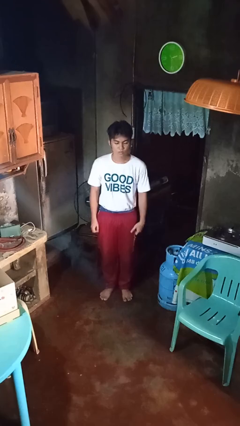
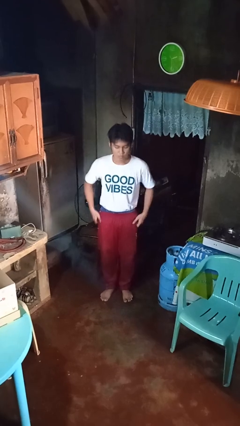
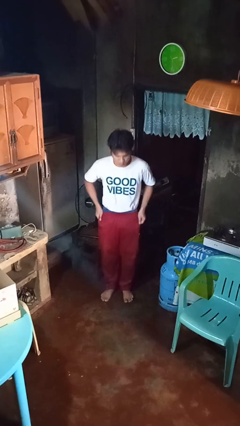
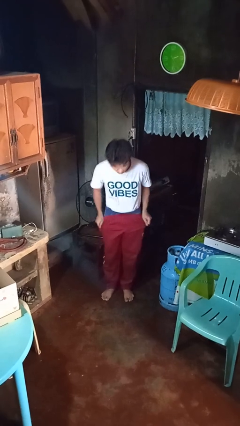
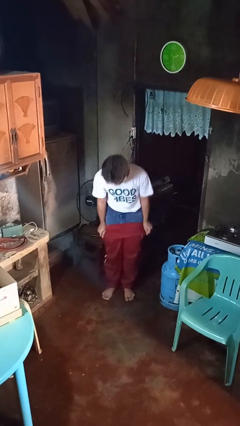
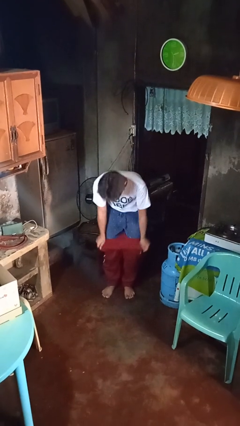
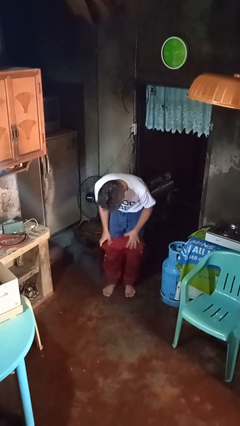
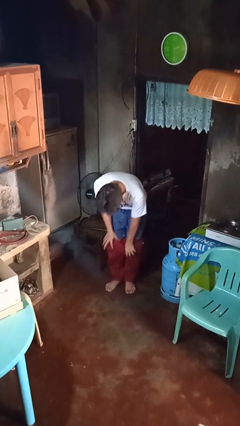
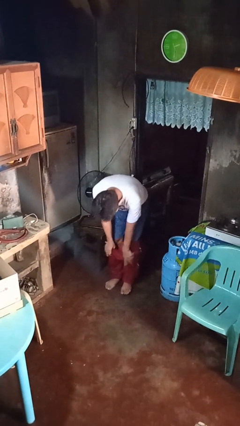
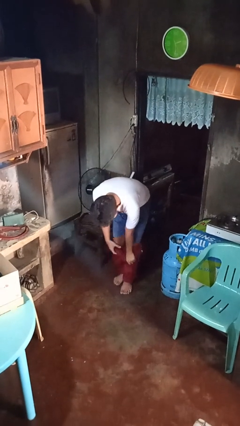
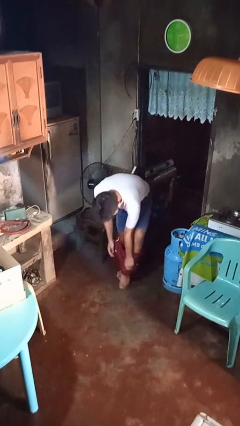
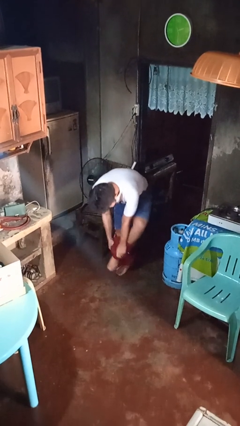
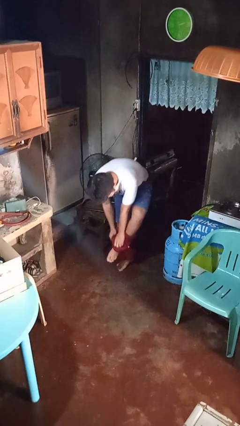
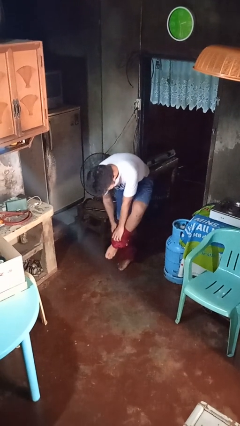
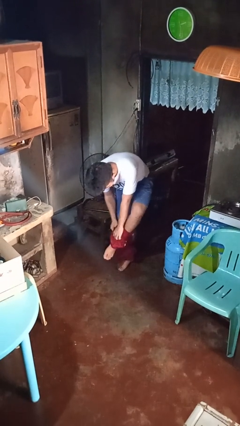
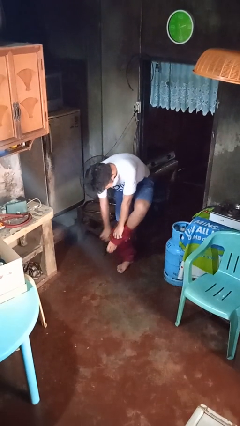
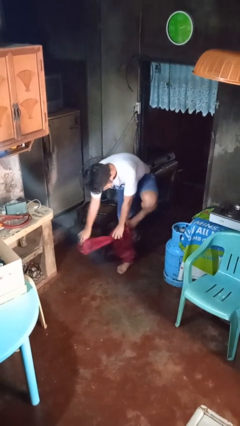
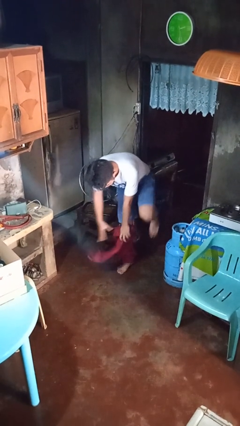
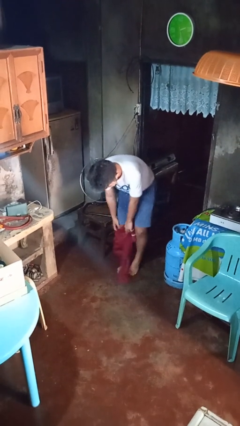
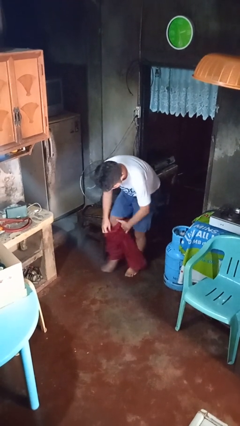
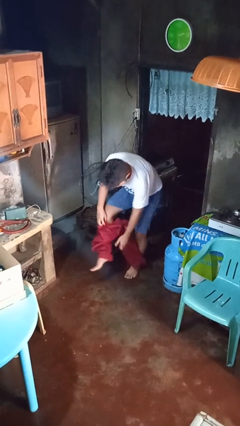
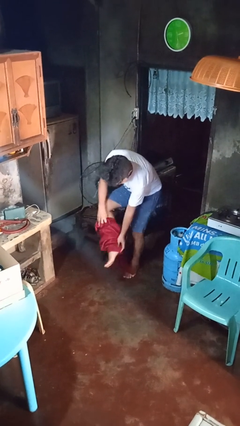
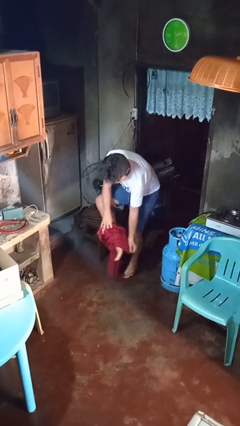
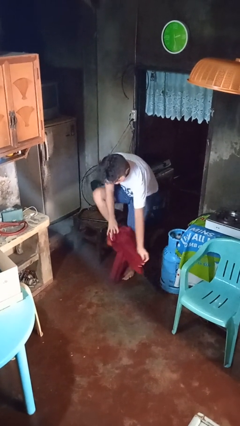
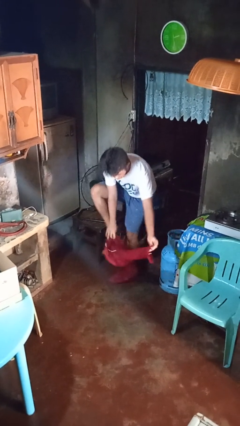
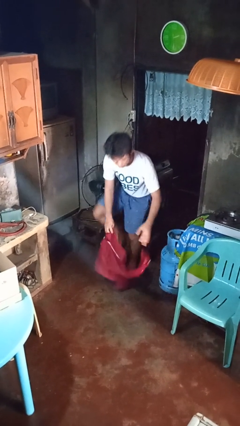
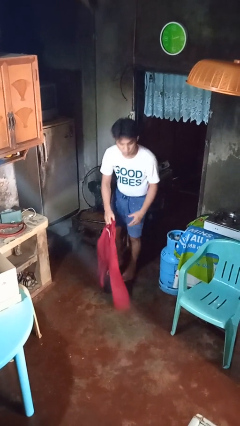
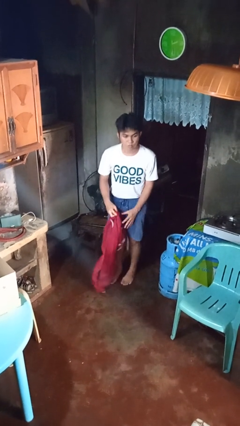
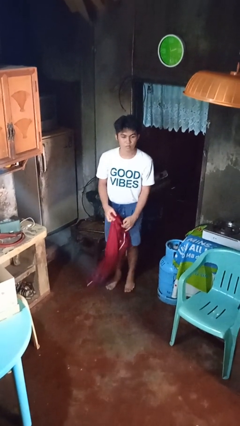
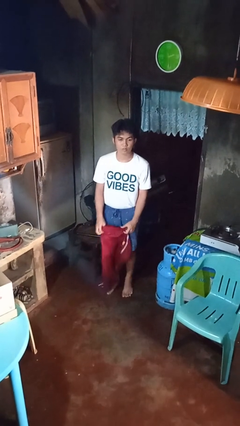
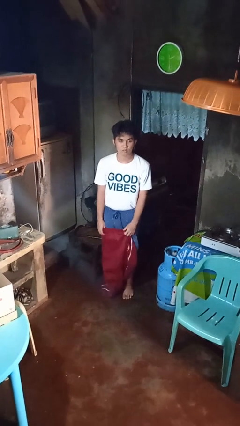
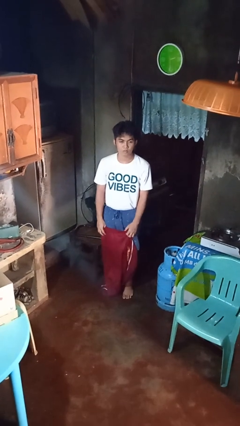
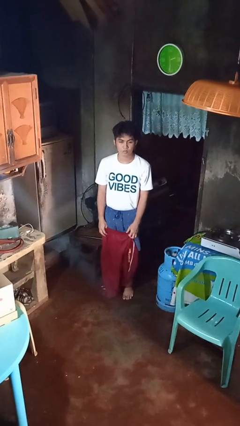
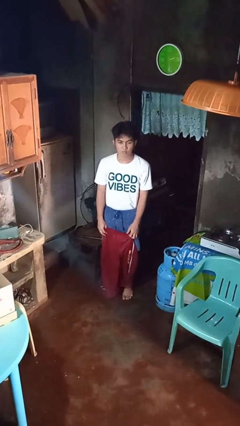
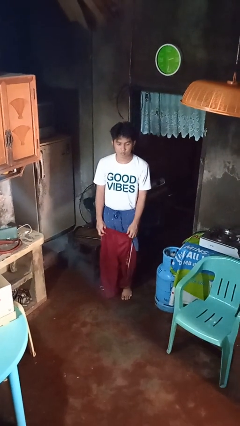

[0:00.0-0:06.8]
person takes off pants

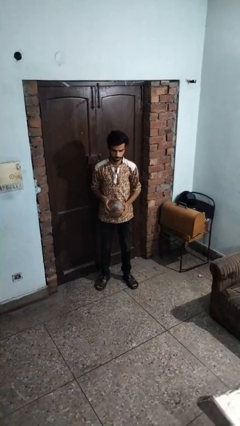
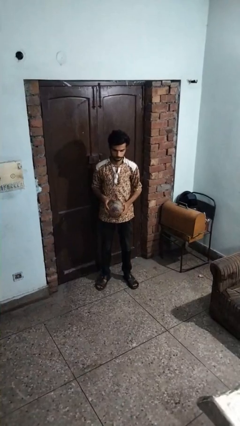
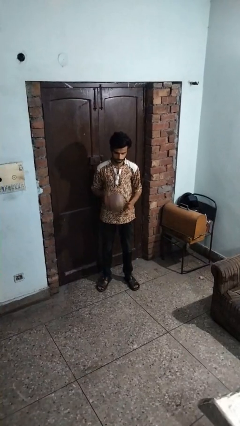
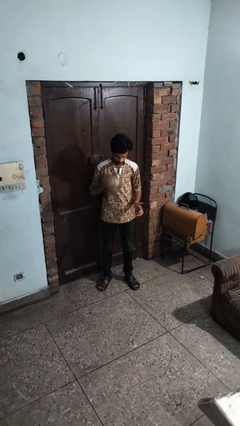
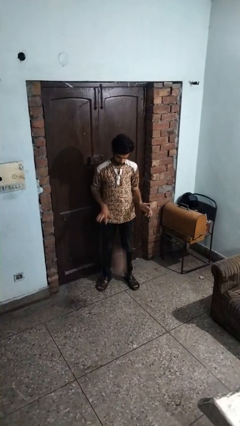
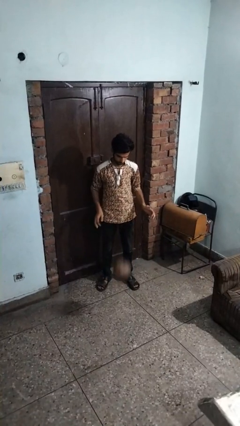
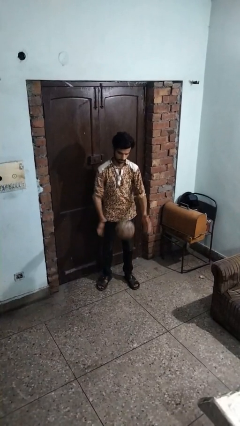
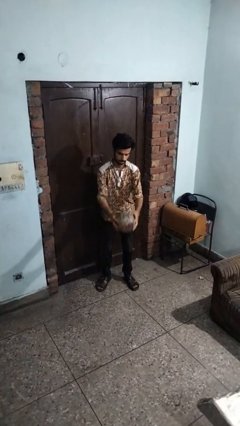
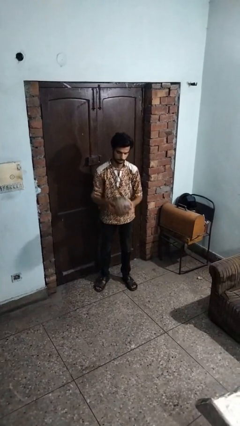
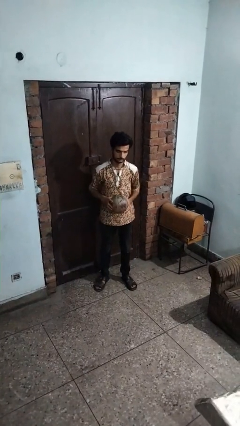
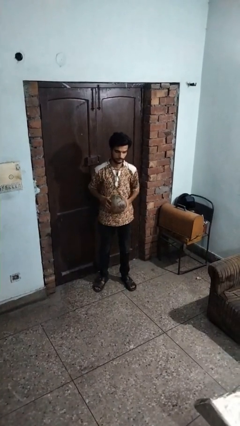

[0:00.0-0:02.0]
person bounces ball on floor

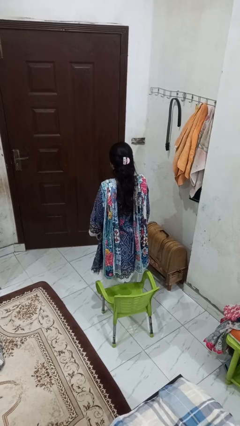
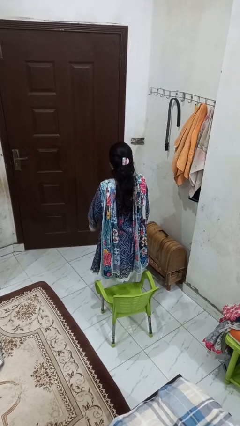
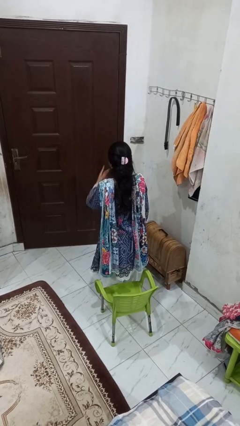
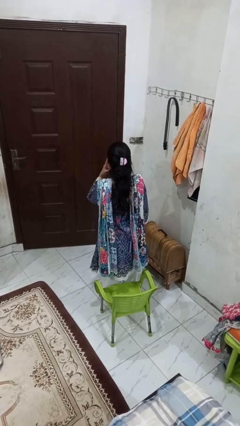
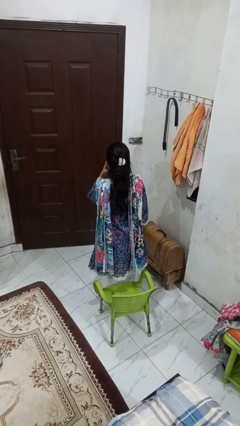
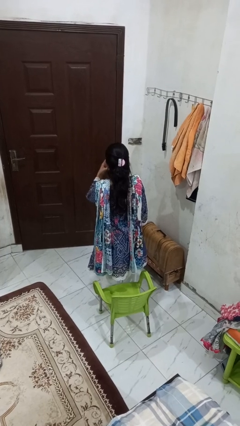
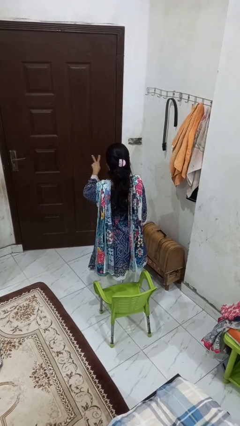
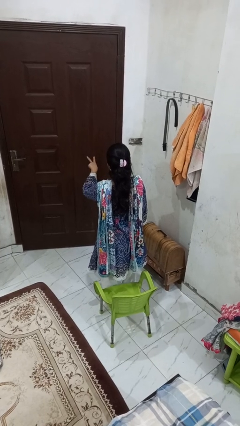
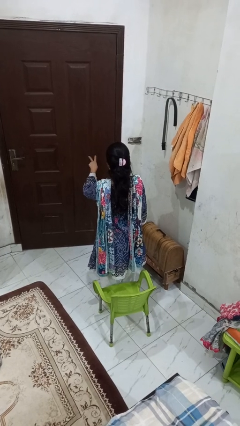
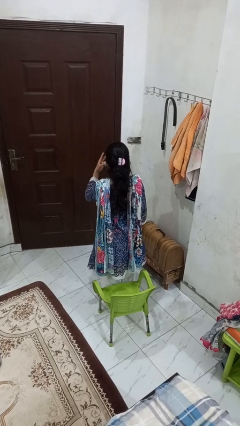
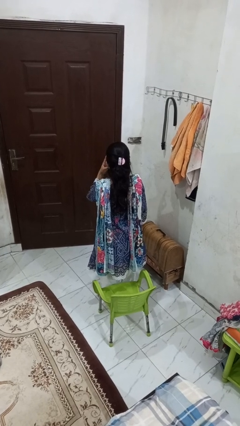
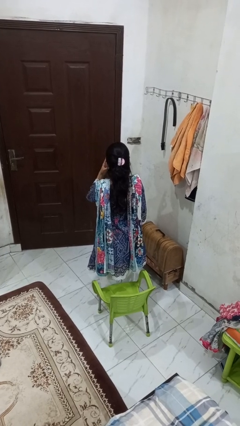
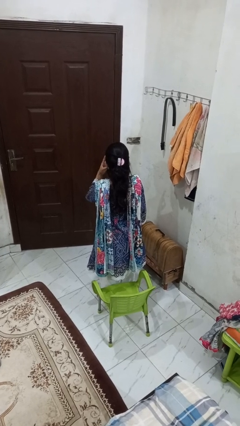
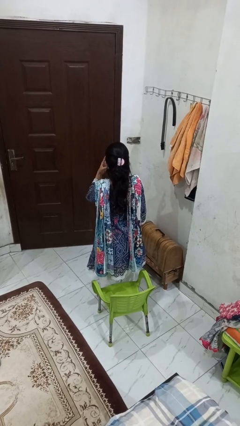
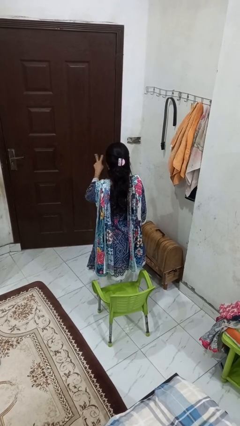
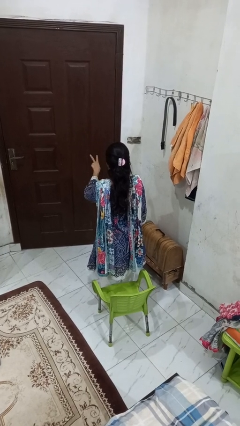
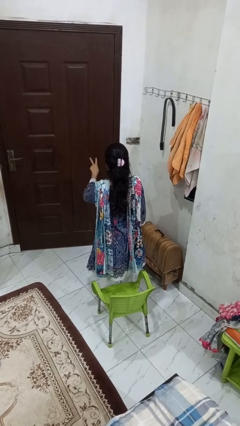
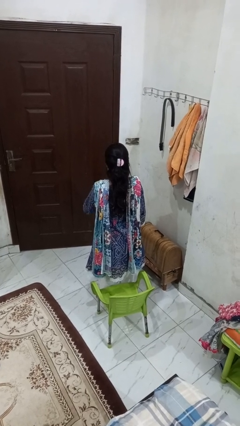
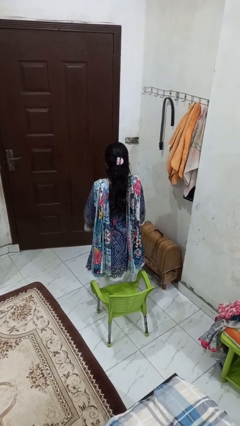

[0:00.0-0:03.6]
person gestures watch closely

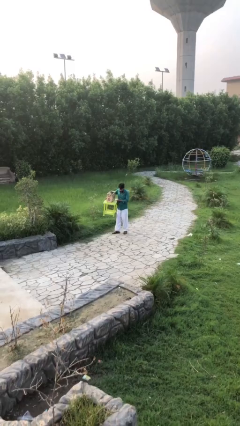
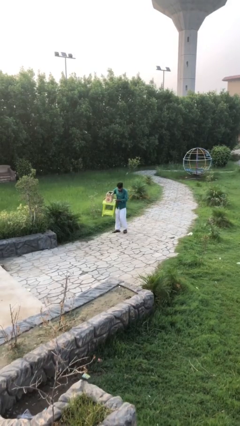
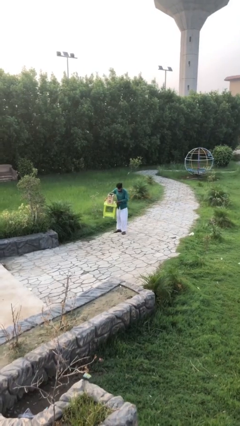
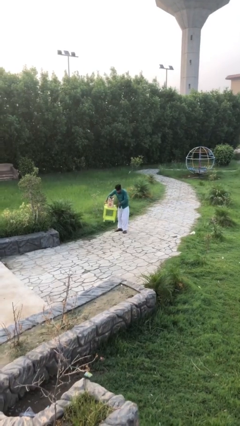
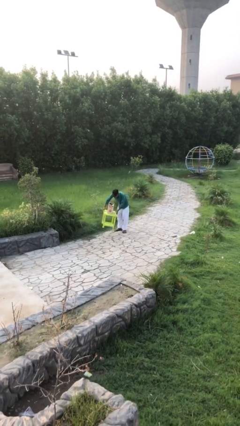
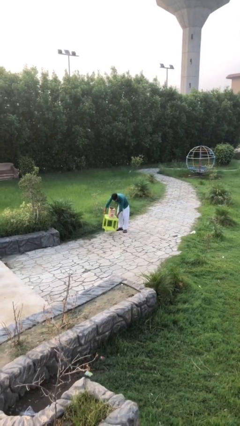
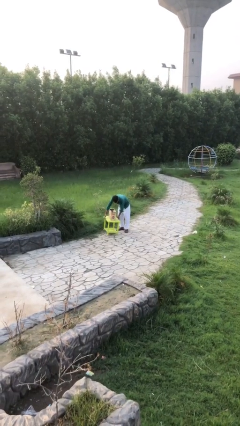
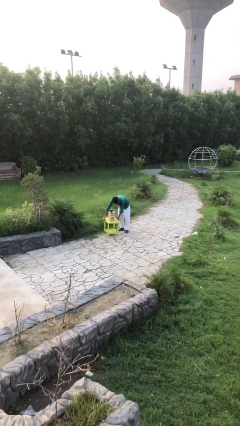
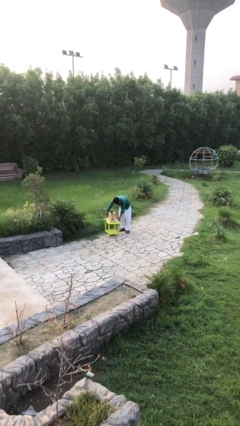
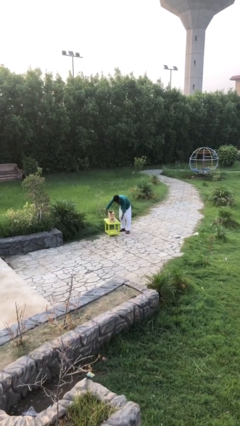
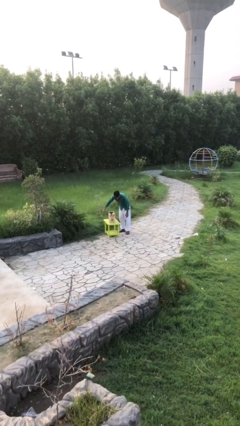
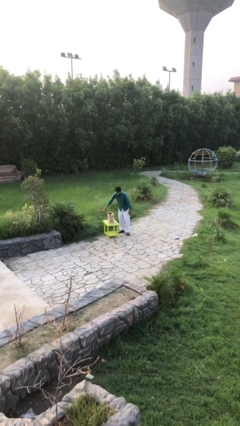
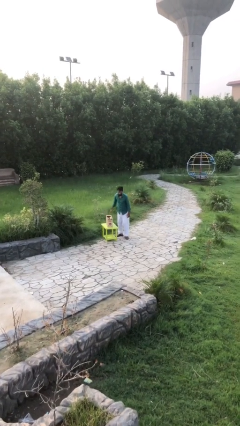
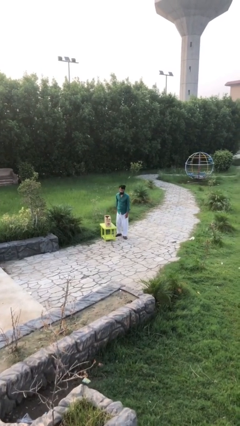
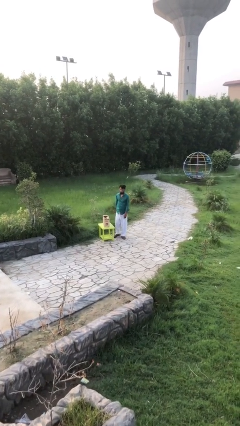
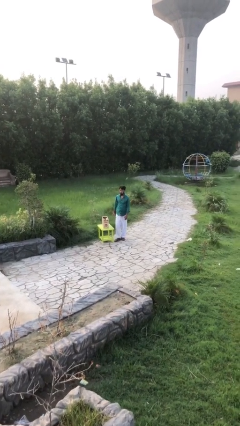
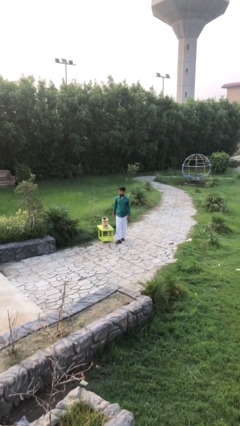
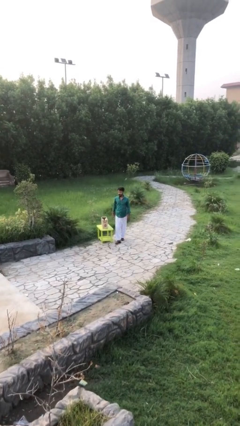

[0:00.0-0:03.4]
person puts down object on floor

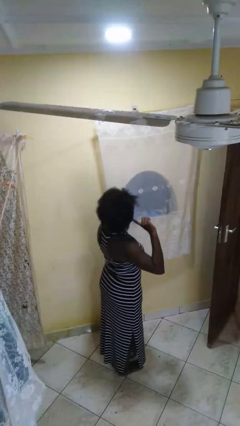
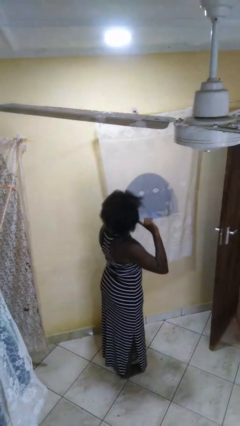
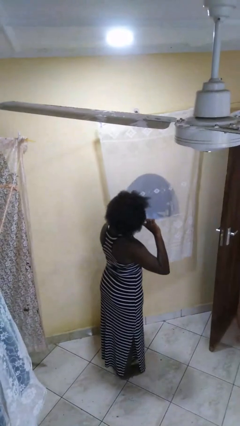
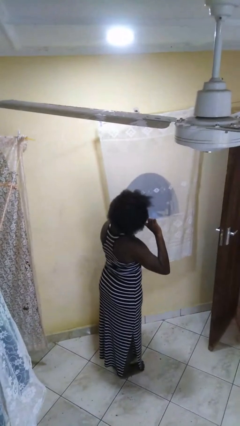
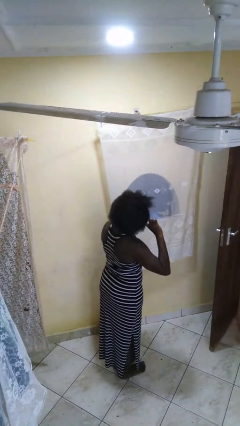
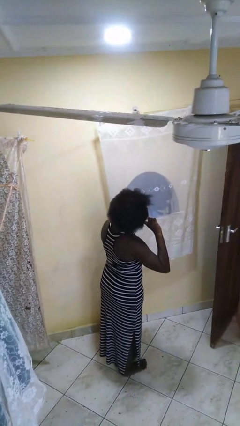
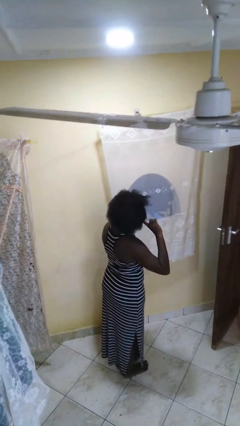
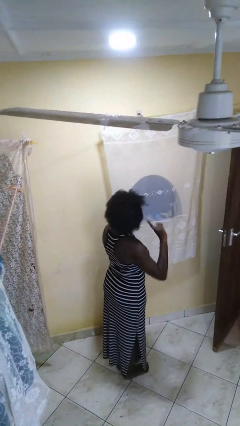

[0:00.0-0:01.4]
person gestures listen closely
